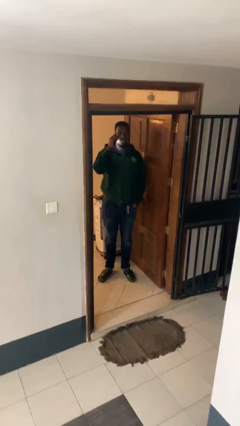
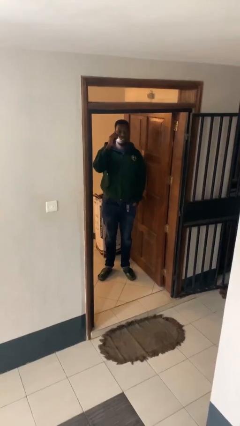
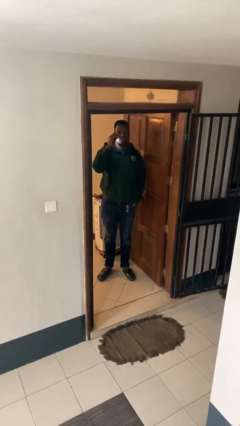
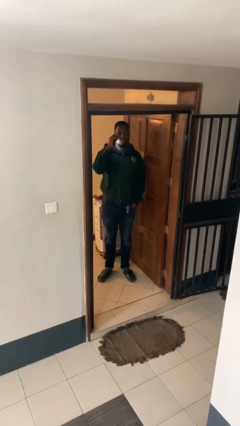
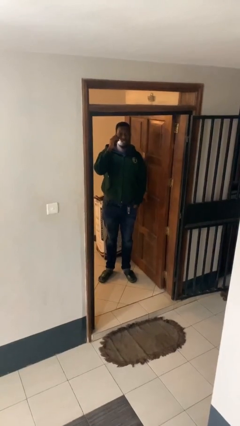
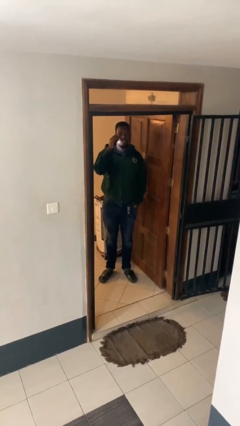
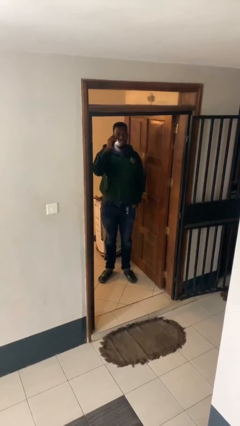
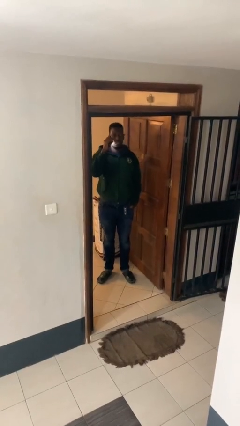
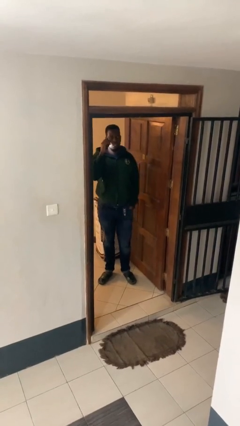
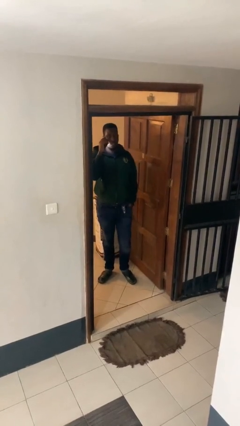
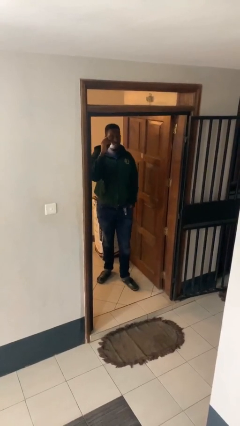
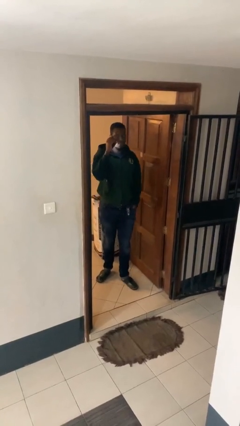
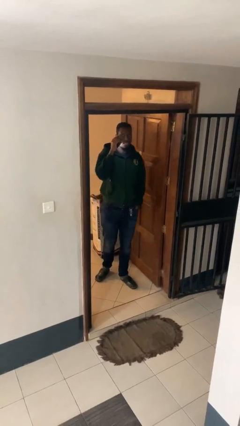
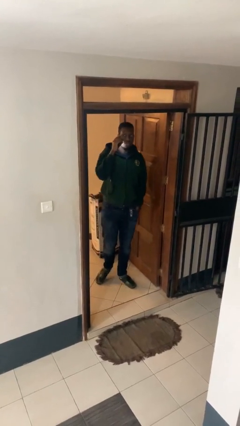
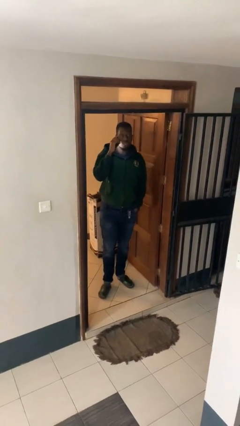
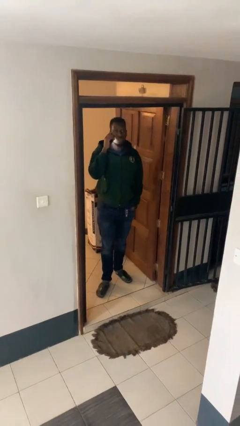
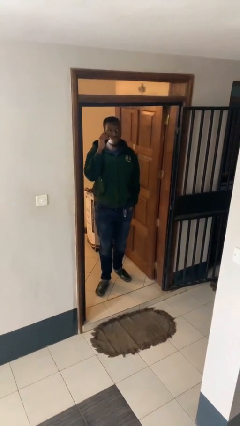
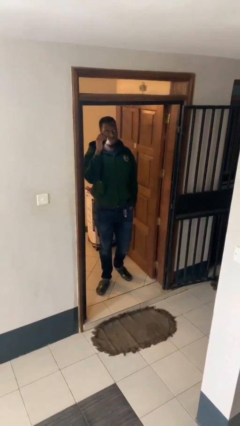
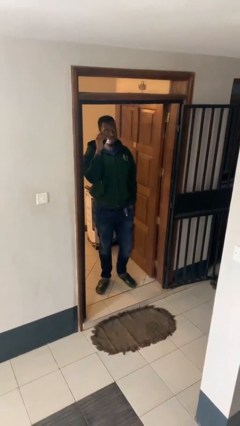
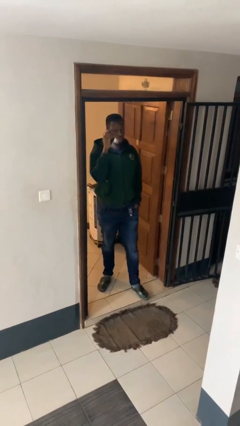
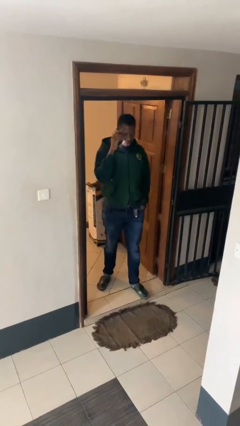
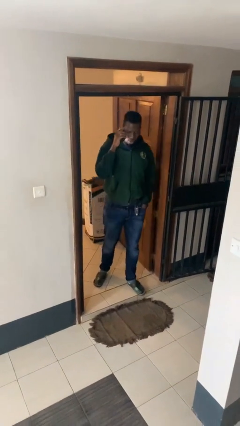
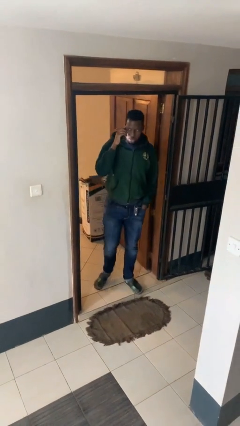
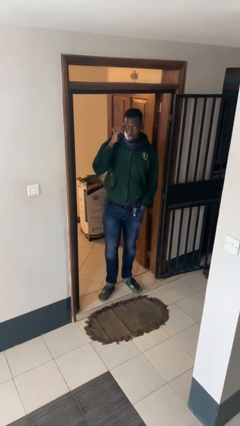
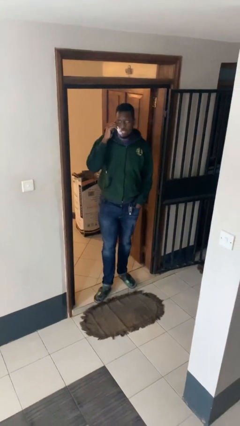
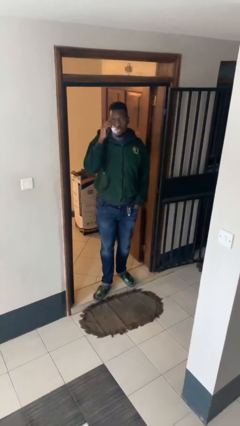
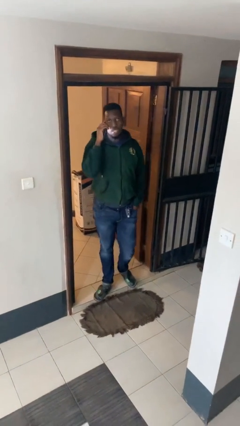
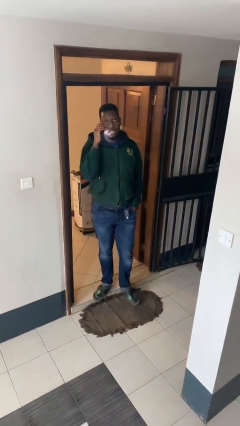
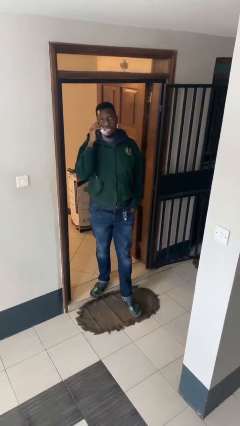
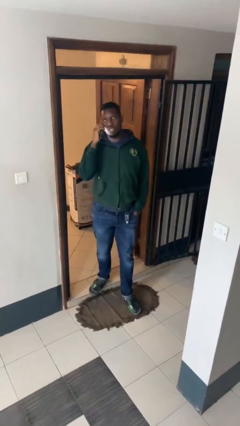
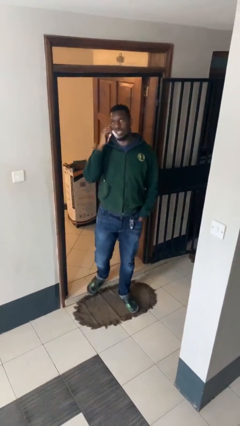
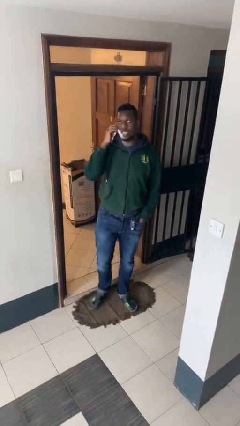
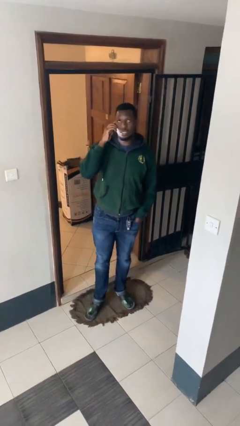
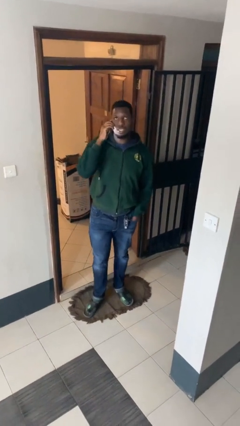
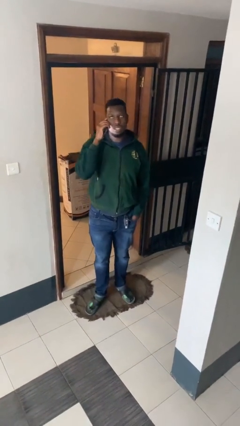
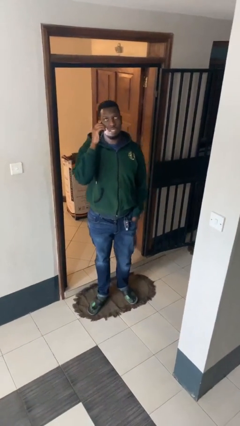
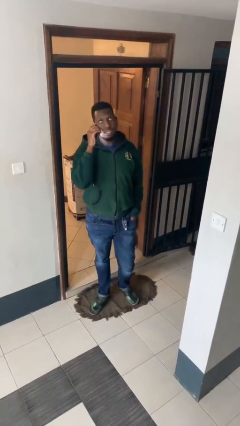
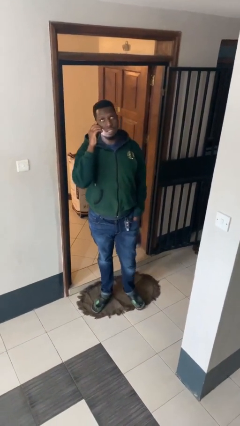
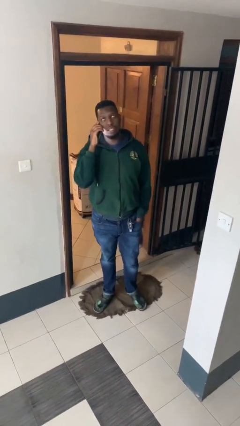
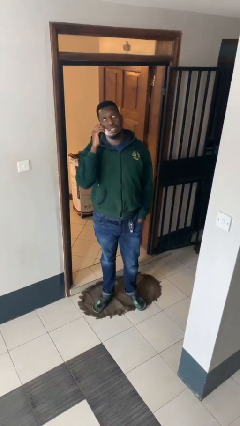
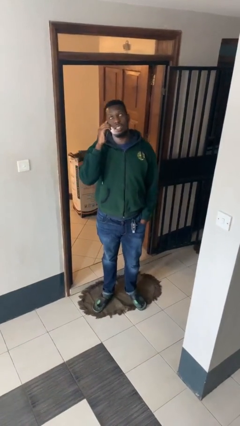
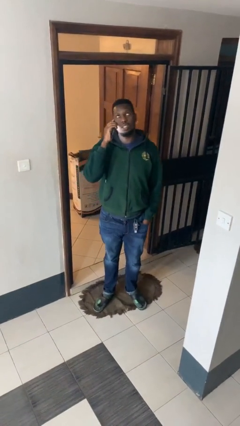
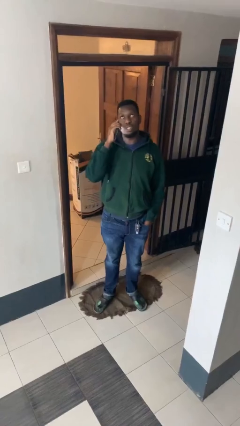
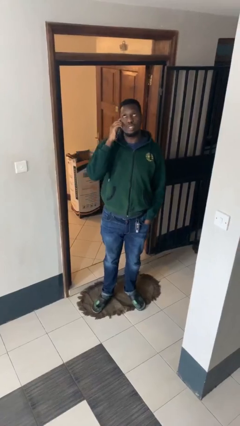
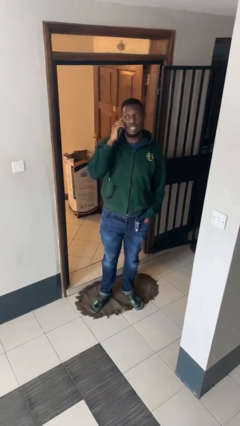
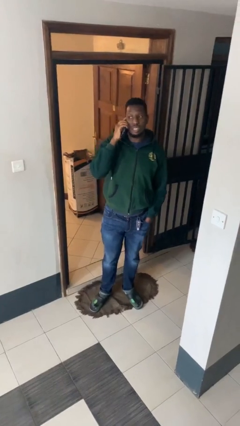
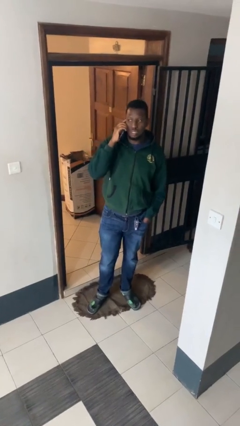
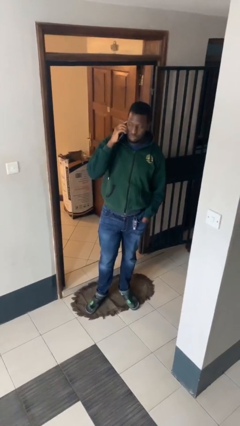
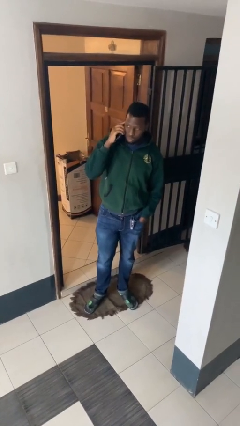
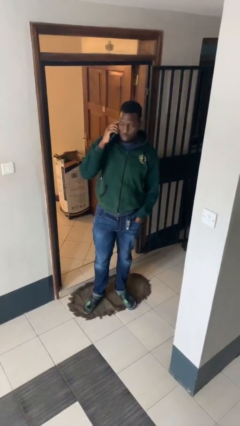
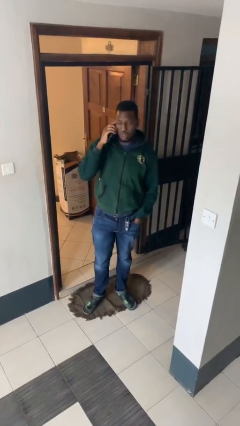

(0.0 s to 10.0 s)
person enters scene through structure

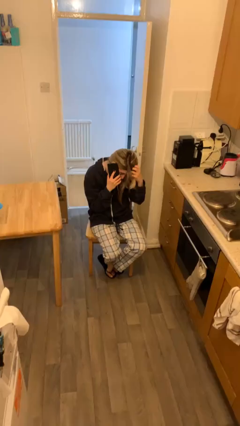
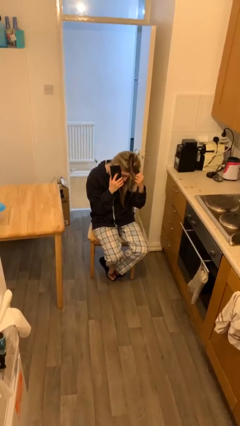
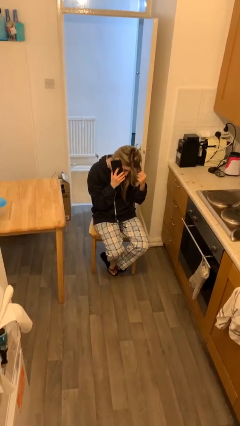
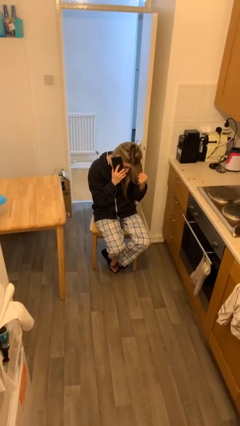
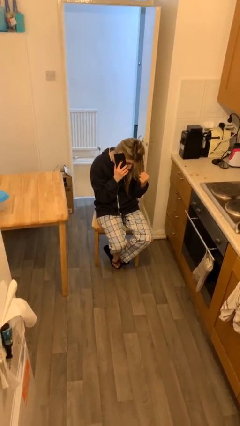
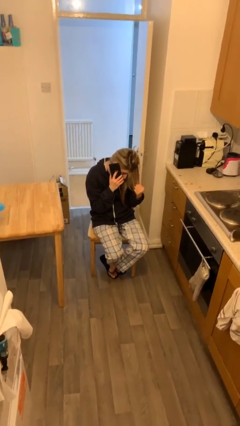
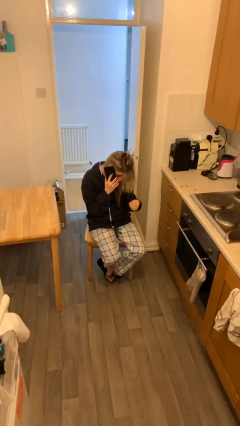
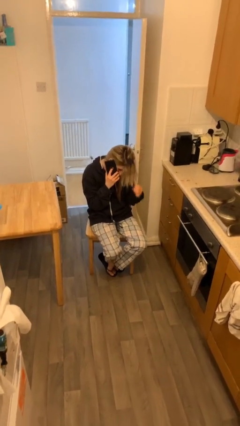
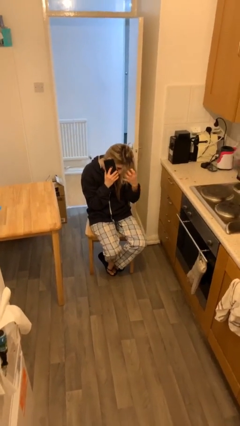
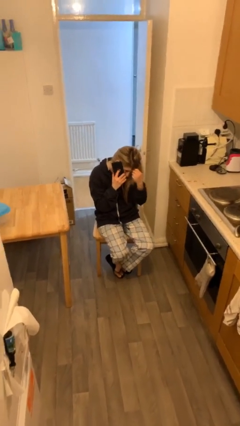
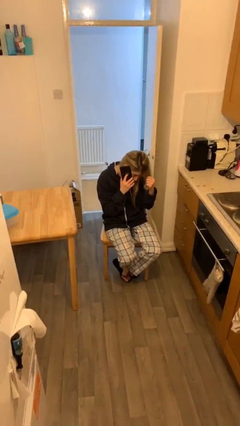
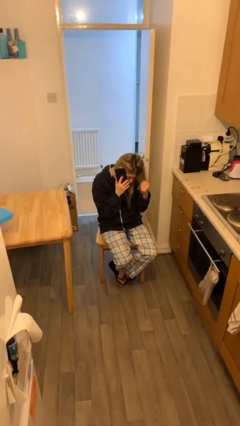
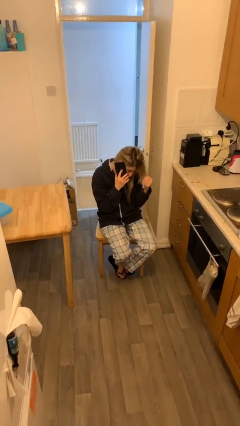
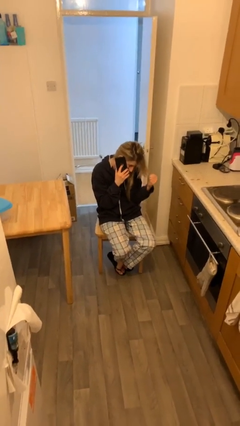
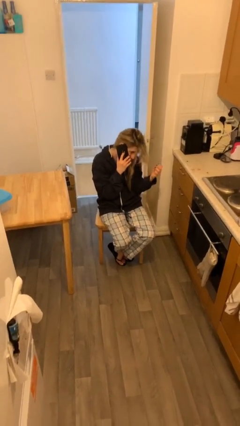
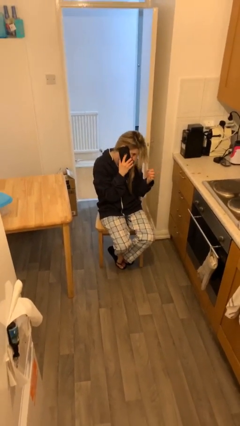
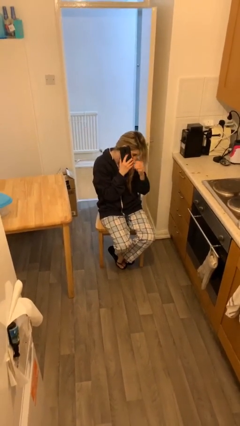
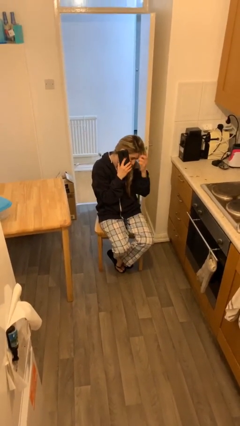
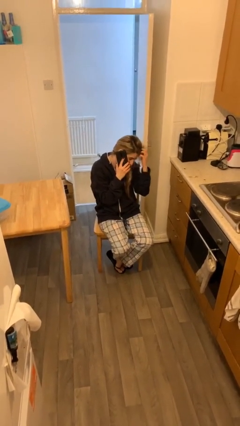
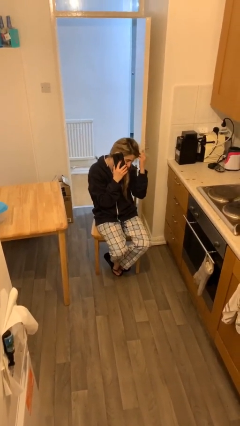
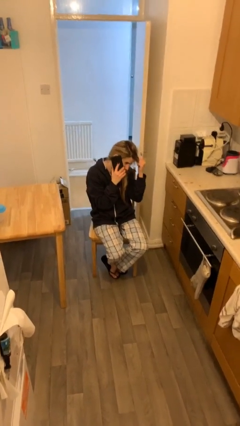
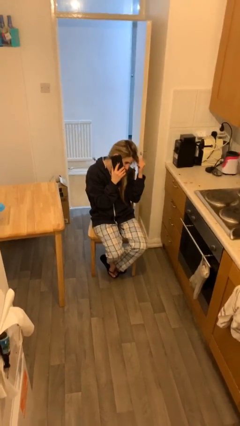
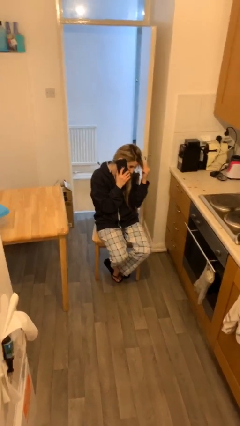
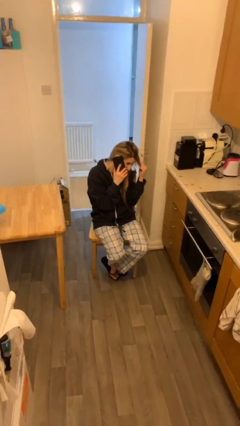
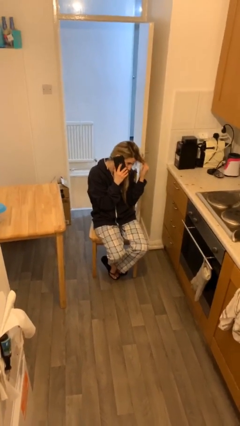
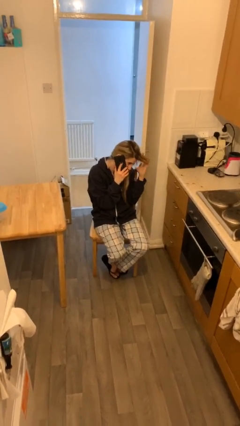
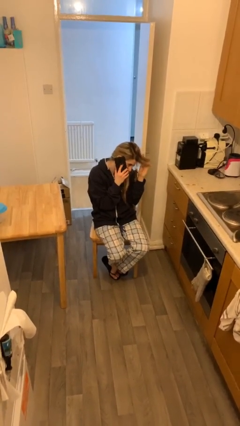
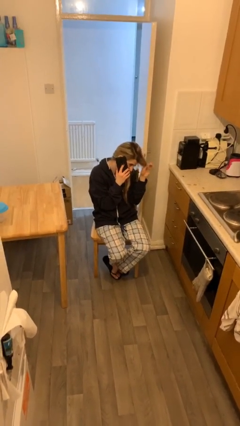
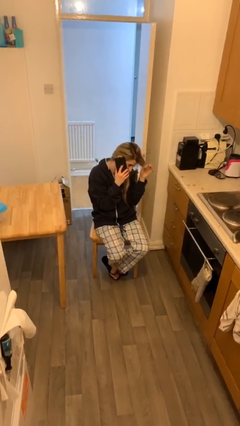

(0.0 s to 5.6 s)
person talks on phone

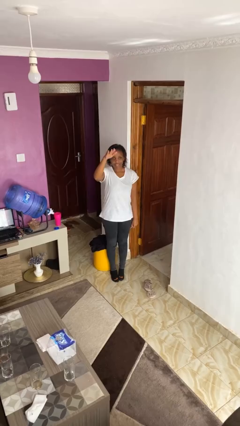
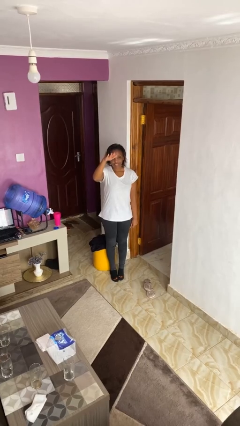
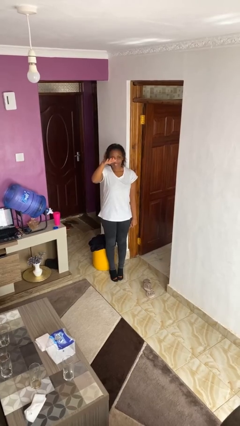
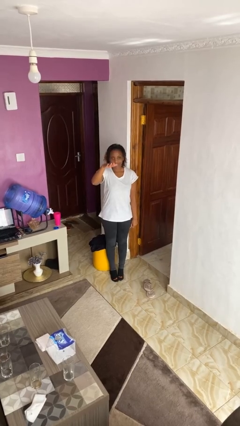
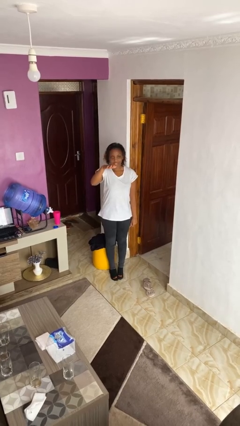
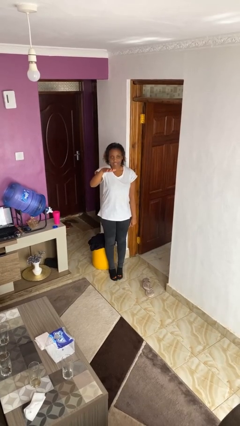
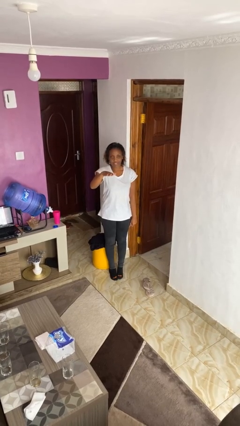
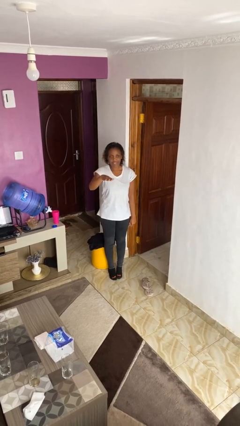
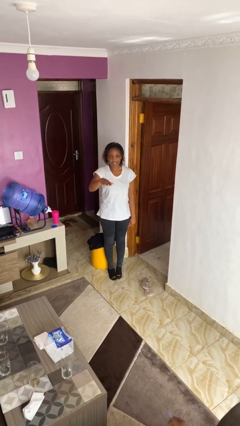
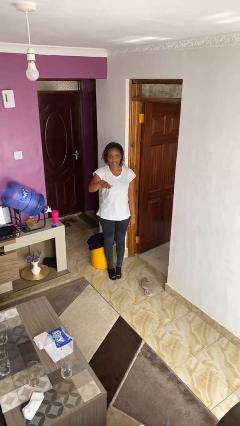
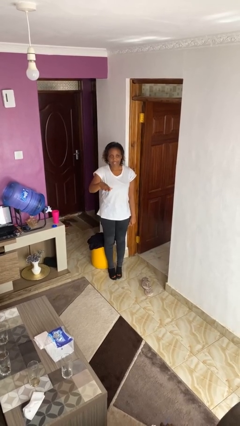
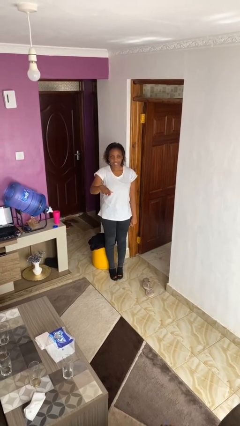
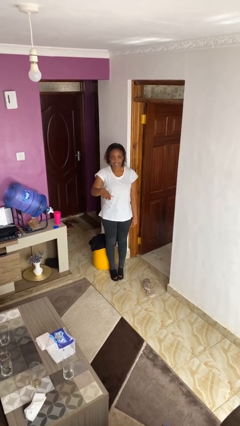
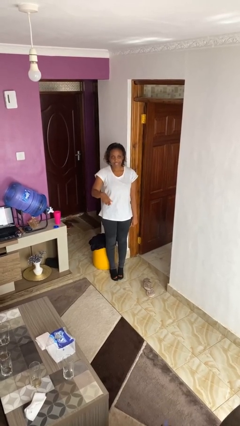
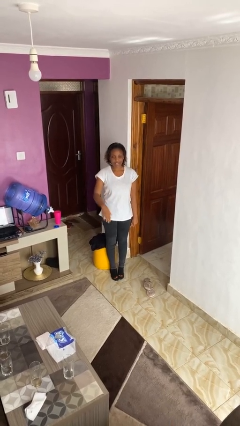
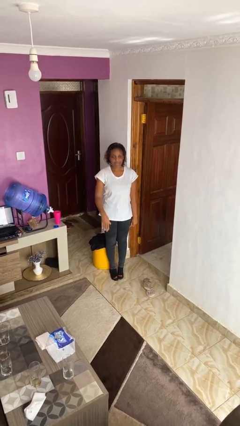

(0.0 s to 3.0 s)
person gestures swipe down
